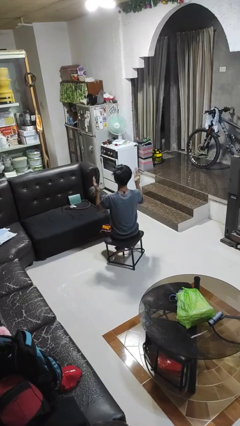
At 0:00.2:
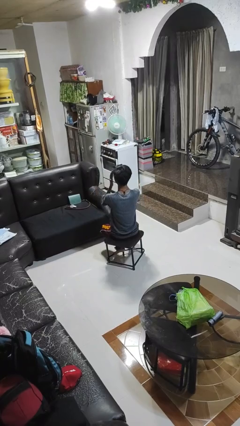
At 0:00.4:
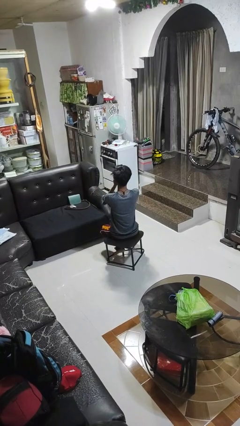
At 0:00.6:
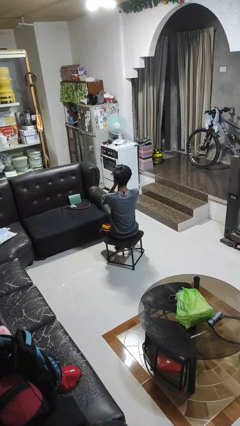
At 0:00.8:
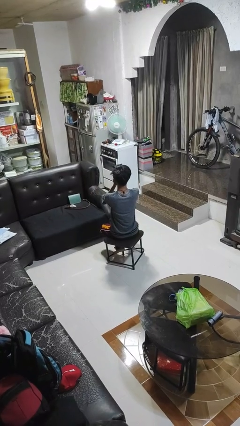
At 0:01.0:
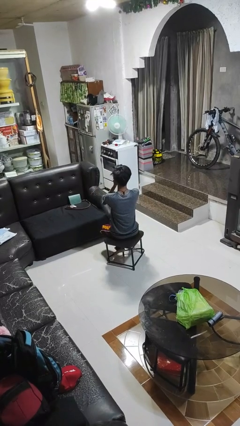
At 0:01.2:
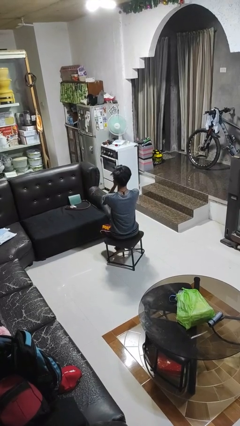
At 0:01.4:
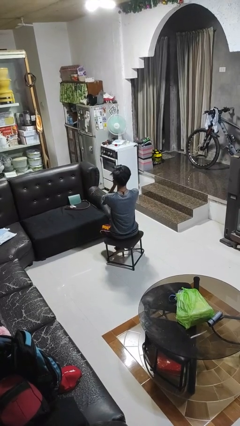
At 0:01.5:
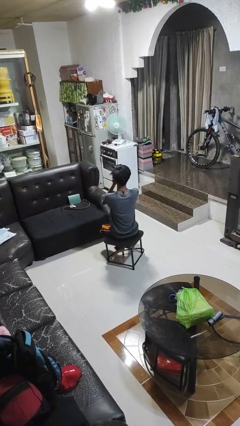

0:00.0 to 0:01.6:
person covers face with hands

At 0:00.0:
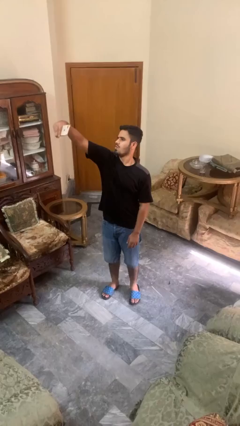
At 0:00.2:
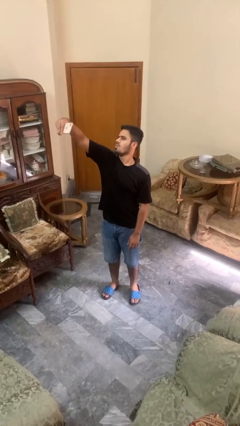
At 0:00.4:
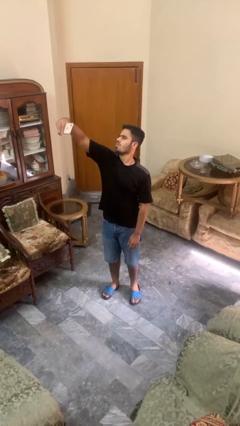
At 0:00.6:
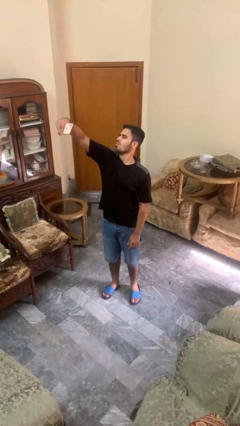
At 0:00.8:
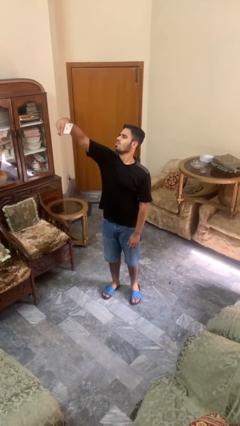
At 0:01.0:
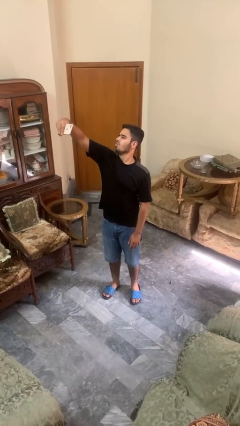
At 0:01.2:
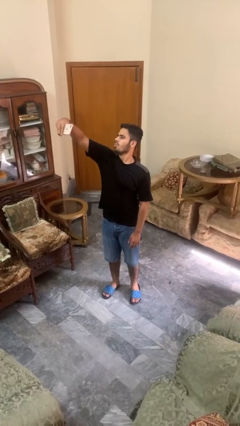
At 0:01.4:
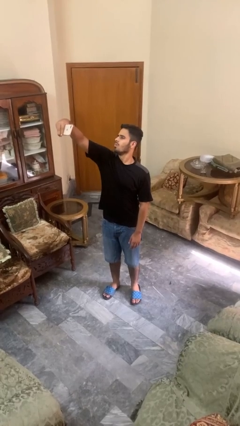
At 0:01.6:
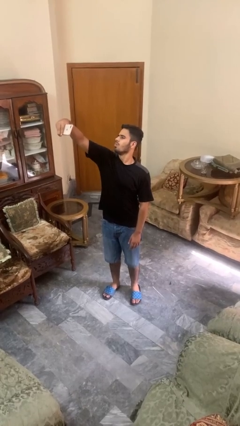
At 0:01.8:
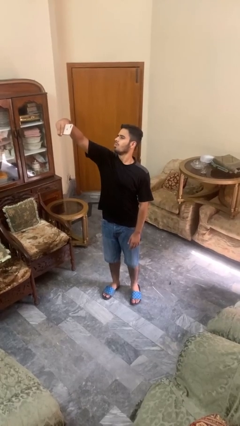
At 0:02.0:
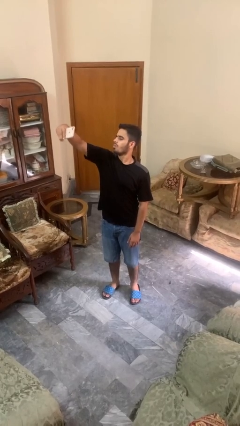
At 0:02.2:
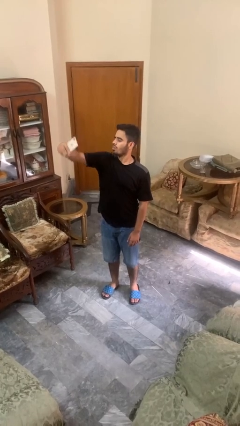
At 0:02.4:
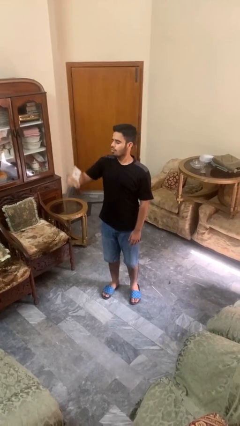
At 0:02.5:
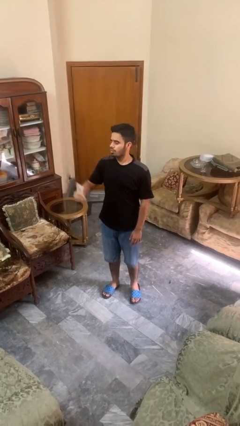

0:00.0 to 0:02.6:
person takes selfie

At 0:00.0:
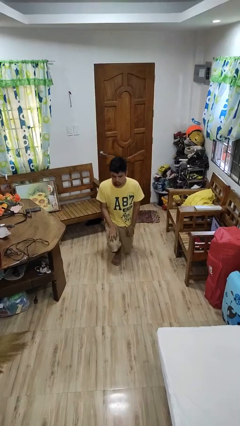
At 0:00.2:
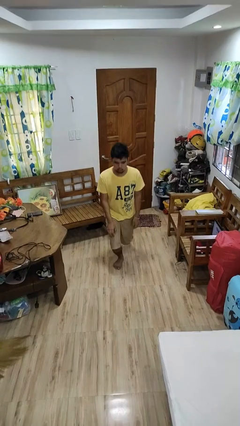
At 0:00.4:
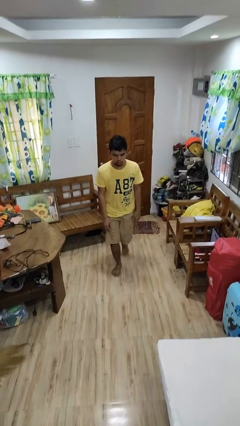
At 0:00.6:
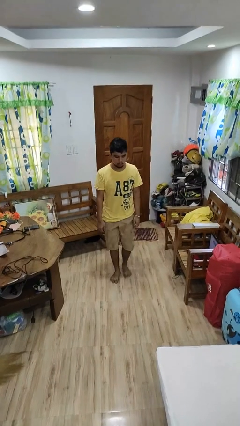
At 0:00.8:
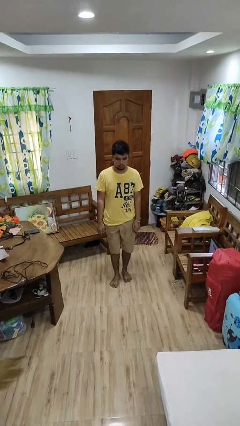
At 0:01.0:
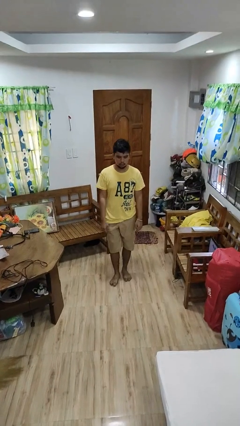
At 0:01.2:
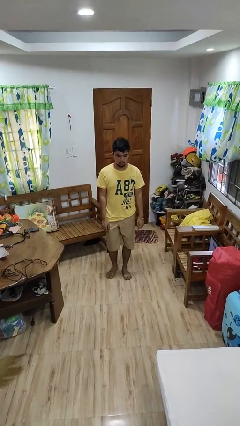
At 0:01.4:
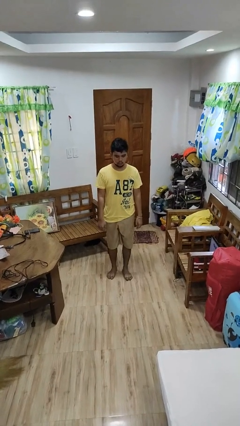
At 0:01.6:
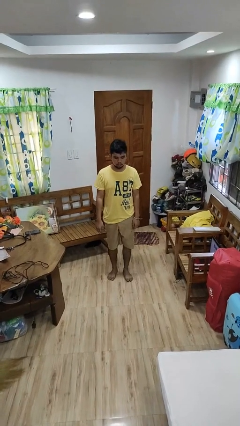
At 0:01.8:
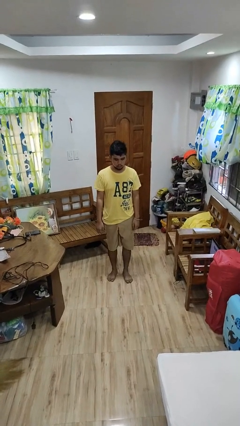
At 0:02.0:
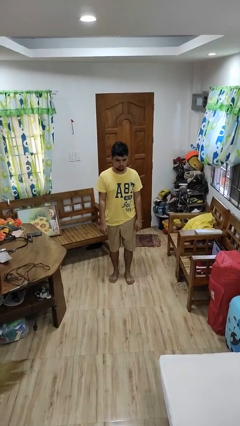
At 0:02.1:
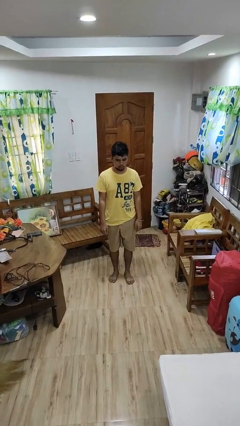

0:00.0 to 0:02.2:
person stands up from floor

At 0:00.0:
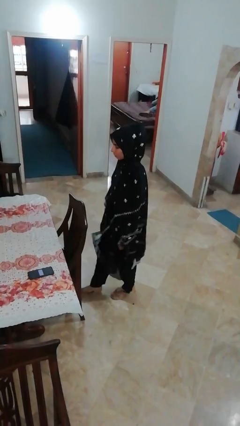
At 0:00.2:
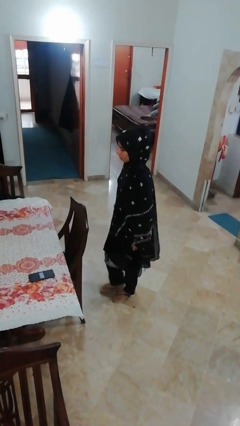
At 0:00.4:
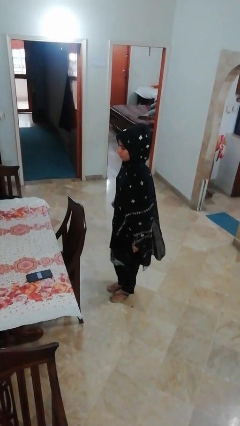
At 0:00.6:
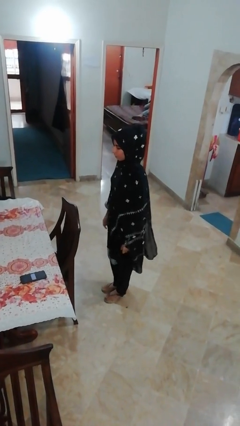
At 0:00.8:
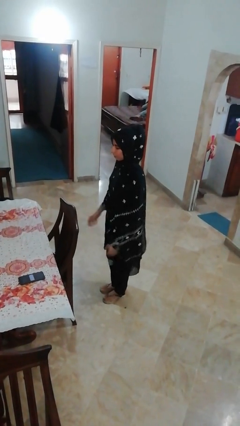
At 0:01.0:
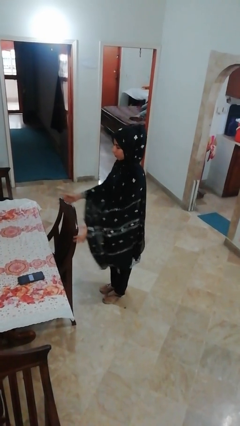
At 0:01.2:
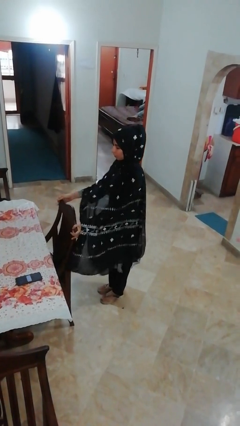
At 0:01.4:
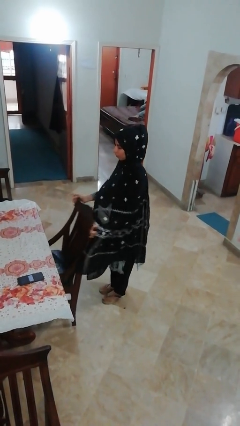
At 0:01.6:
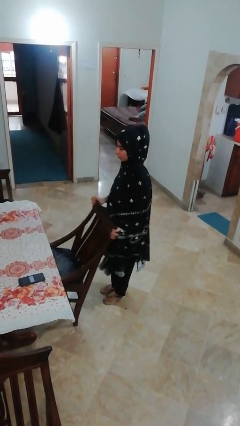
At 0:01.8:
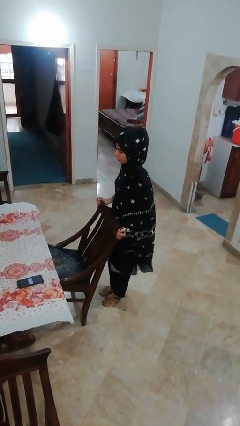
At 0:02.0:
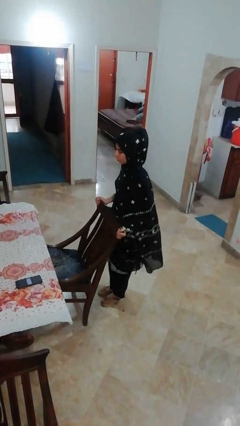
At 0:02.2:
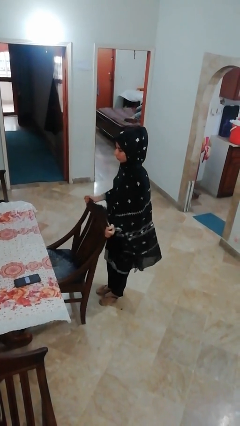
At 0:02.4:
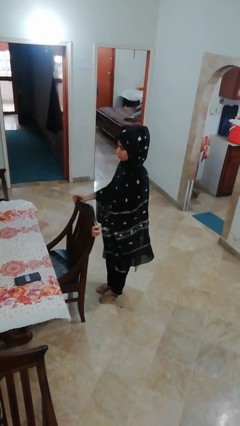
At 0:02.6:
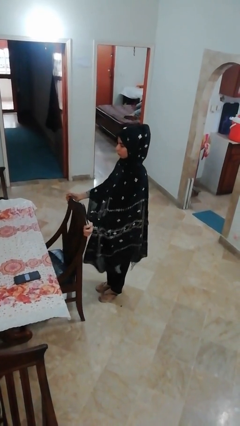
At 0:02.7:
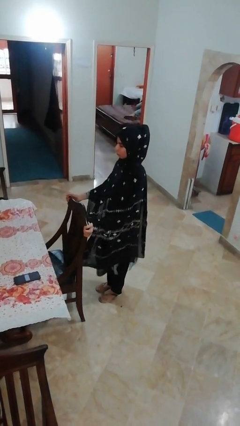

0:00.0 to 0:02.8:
person pulls out chair

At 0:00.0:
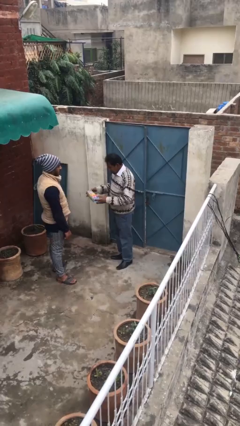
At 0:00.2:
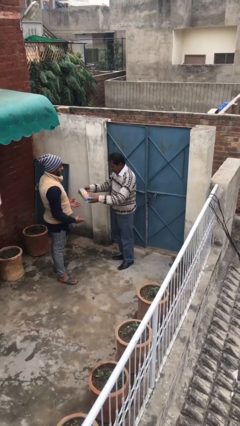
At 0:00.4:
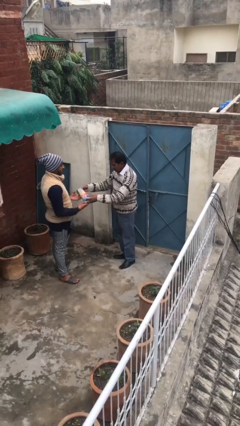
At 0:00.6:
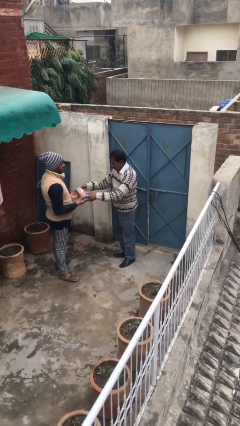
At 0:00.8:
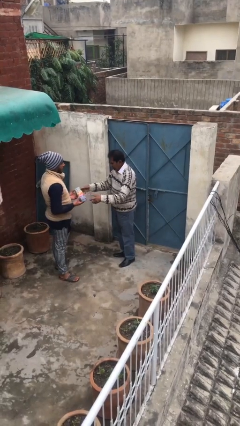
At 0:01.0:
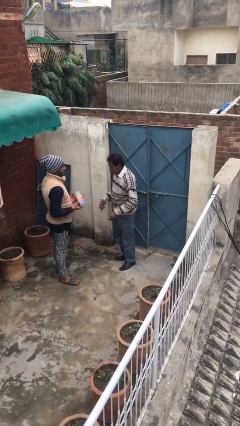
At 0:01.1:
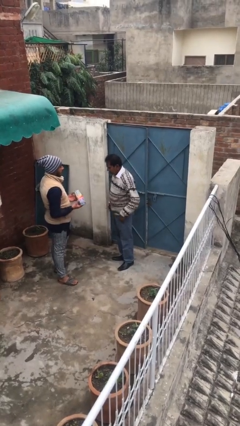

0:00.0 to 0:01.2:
person transfers object to person

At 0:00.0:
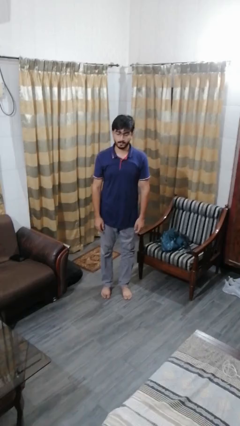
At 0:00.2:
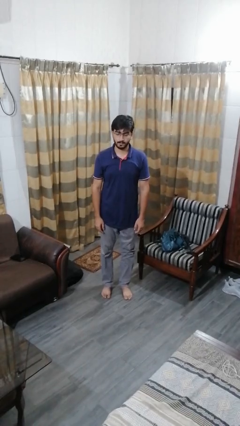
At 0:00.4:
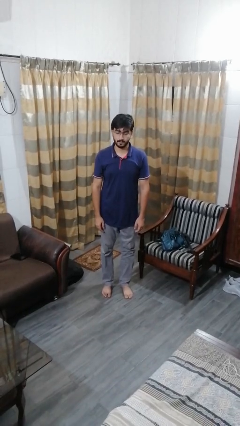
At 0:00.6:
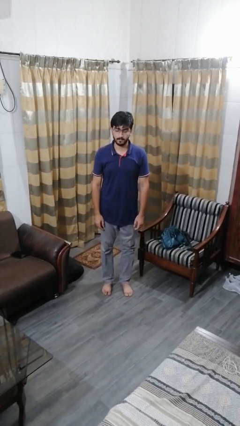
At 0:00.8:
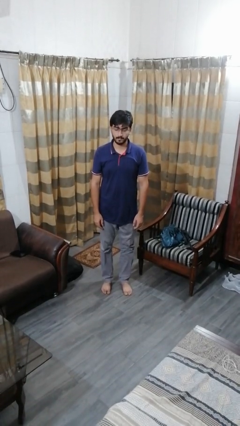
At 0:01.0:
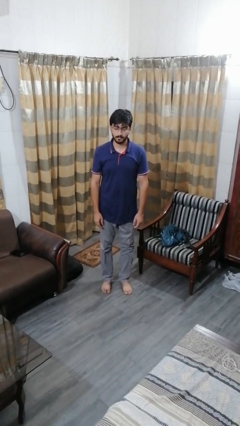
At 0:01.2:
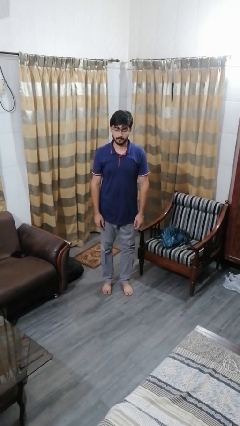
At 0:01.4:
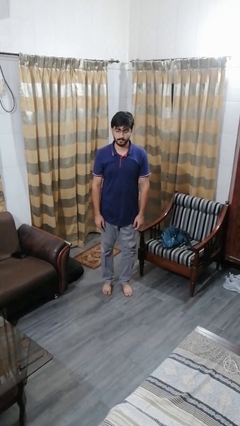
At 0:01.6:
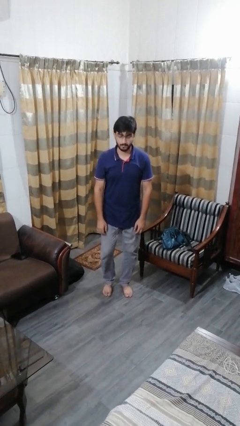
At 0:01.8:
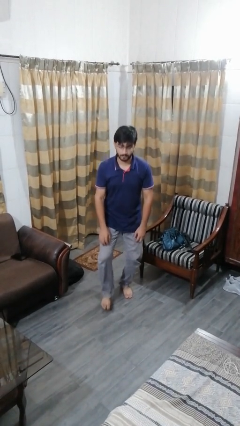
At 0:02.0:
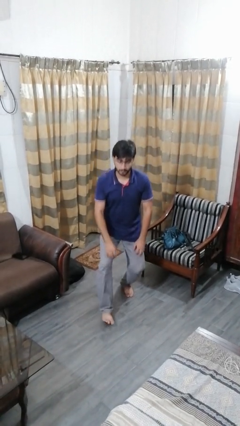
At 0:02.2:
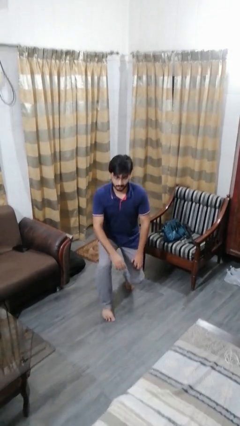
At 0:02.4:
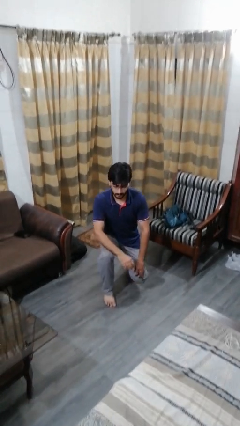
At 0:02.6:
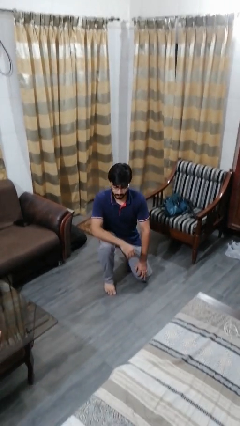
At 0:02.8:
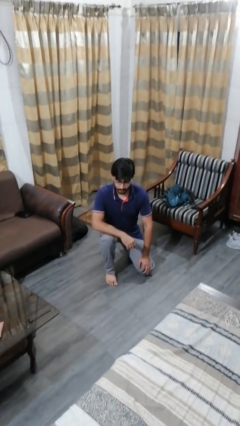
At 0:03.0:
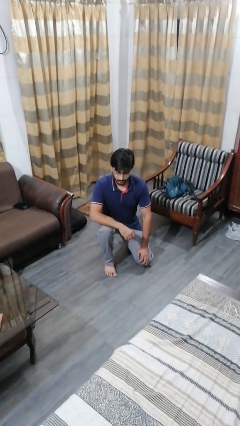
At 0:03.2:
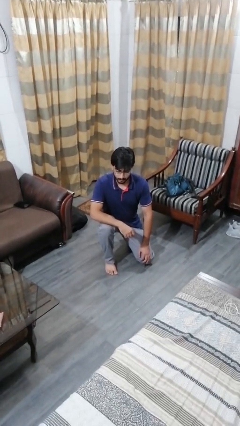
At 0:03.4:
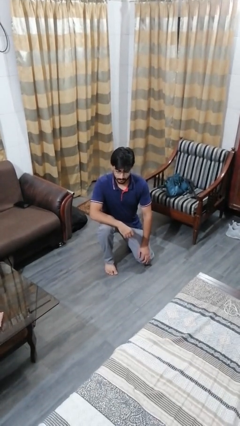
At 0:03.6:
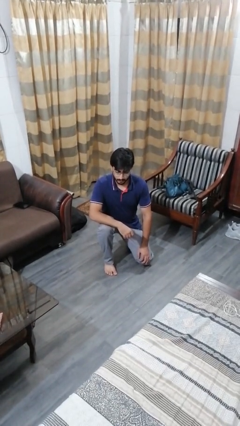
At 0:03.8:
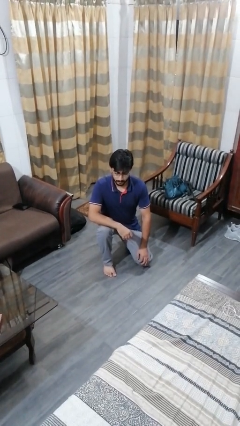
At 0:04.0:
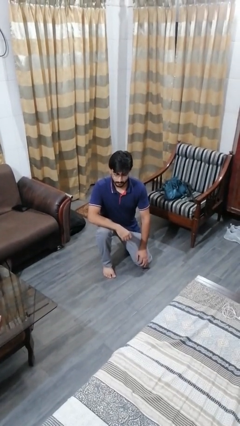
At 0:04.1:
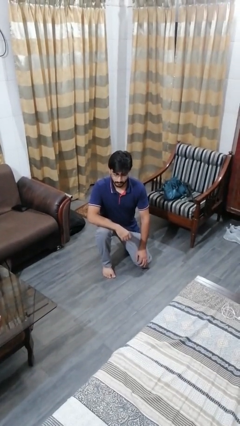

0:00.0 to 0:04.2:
person kneels

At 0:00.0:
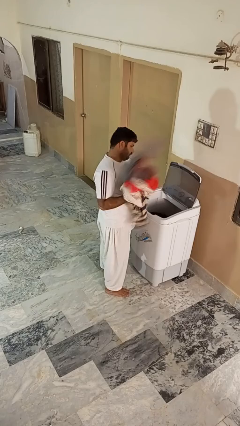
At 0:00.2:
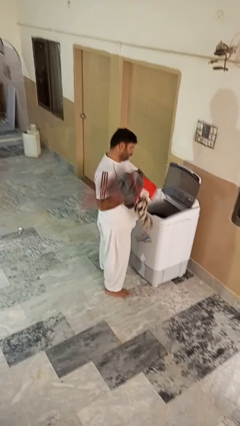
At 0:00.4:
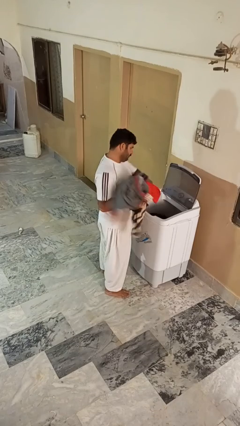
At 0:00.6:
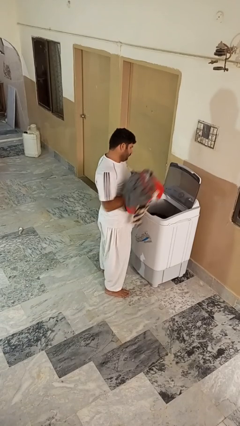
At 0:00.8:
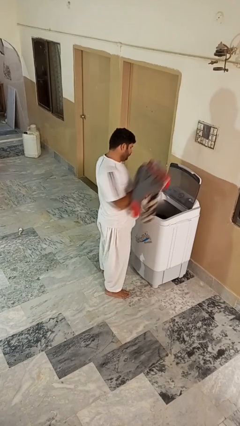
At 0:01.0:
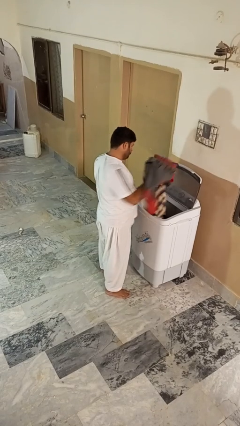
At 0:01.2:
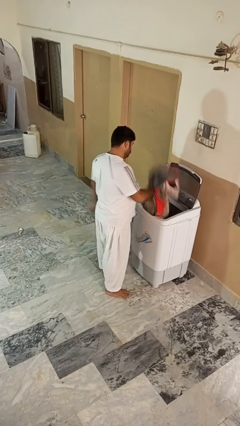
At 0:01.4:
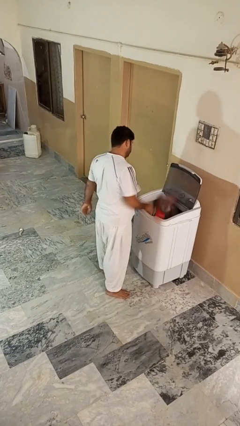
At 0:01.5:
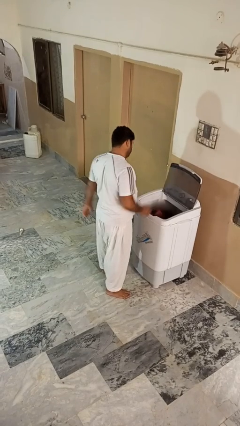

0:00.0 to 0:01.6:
person loads clotheswasher

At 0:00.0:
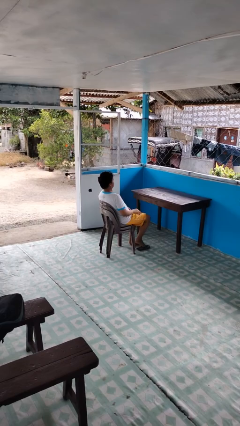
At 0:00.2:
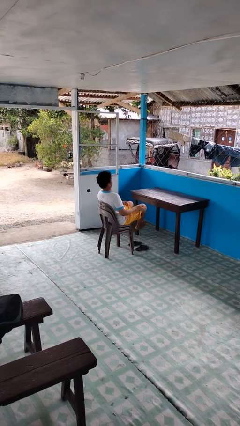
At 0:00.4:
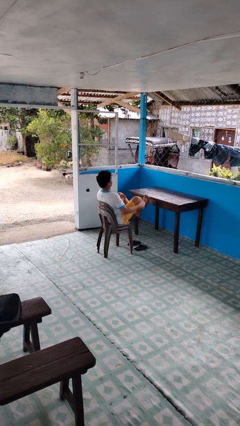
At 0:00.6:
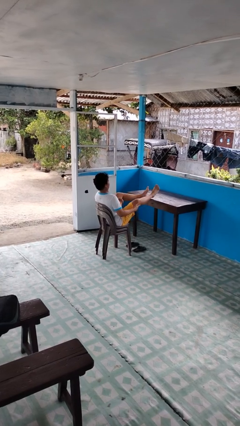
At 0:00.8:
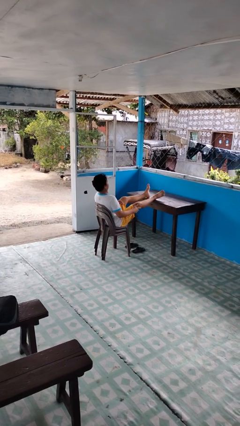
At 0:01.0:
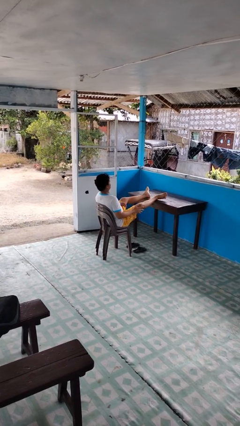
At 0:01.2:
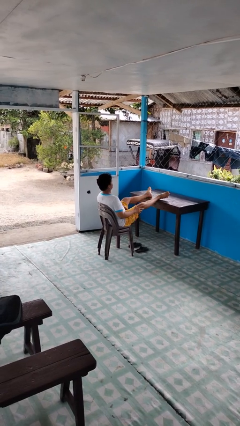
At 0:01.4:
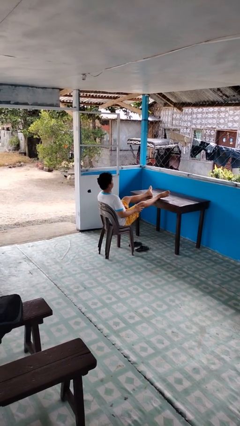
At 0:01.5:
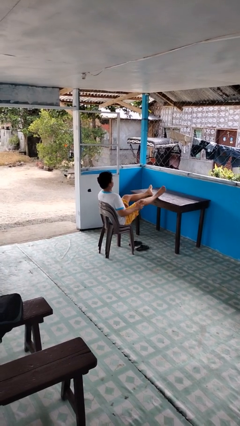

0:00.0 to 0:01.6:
person puts feet up
